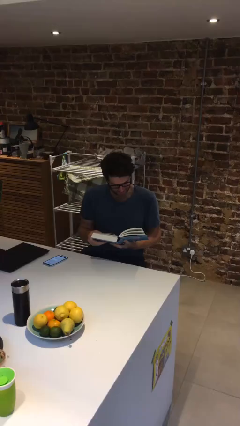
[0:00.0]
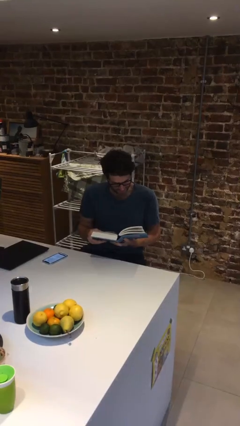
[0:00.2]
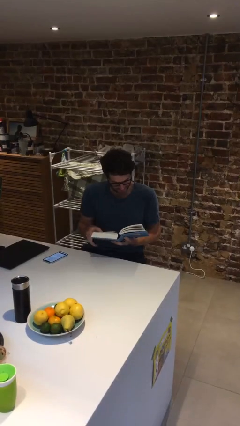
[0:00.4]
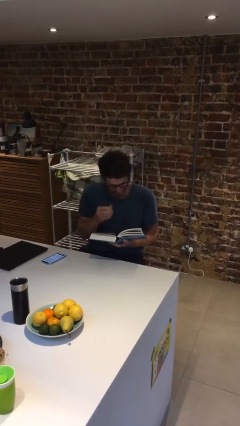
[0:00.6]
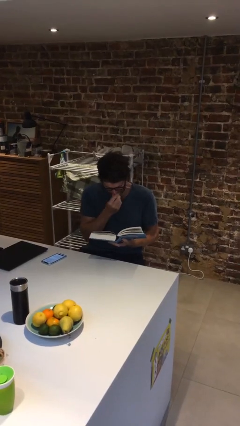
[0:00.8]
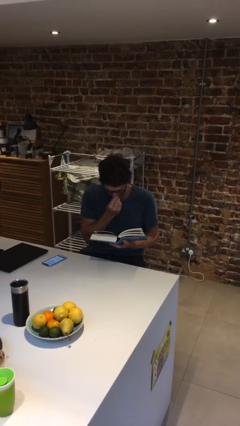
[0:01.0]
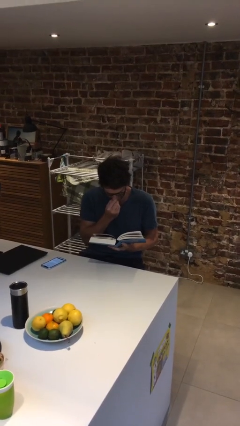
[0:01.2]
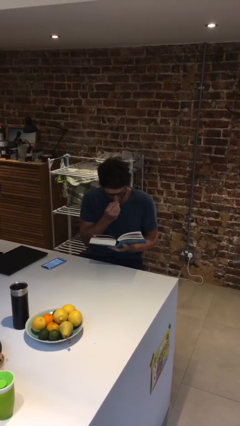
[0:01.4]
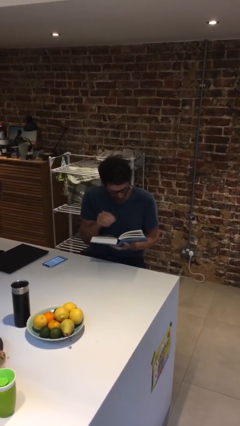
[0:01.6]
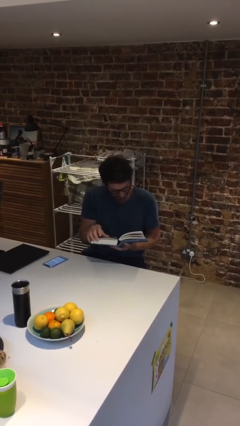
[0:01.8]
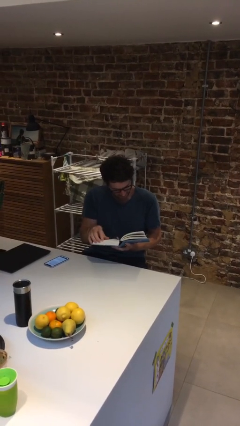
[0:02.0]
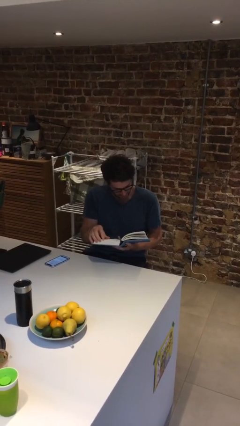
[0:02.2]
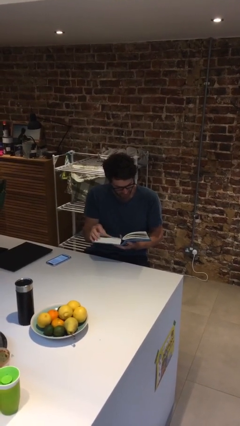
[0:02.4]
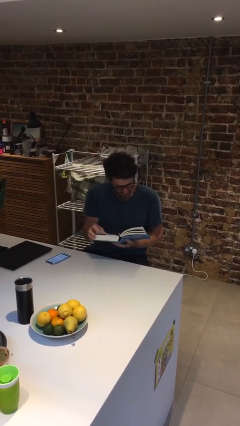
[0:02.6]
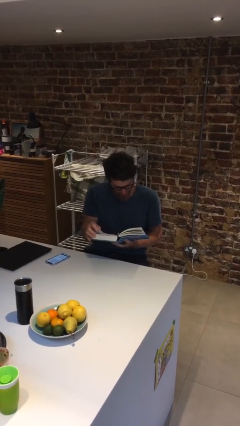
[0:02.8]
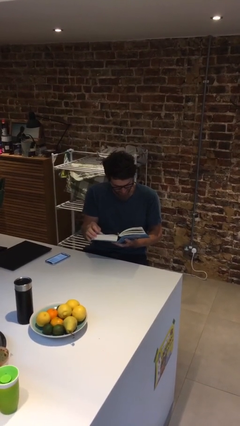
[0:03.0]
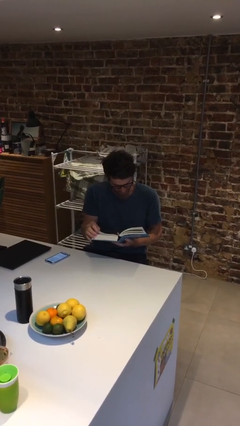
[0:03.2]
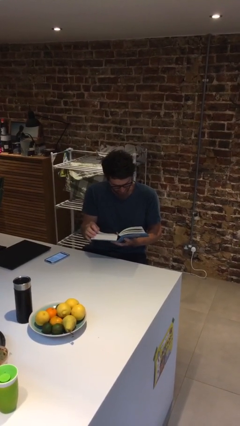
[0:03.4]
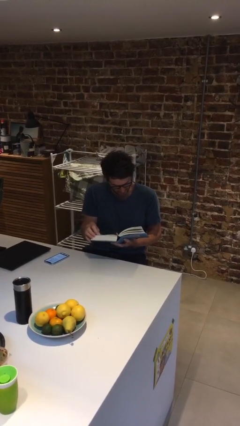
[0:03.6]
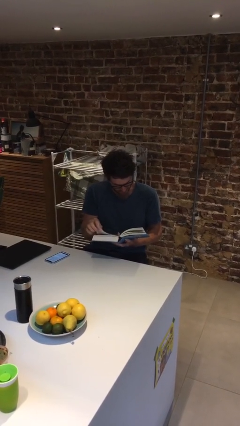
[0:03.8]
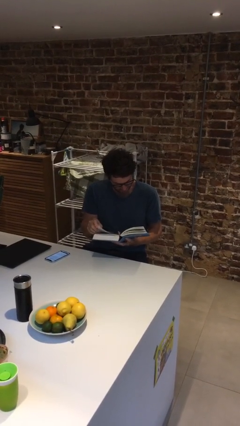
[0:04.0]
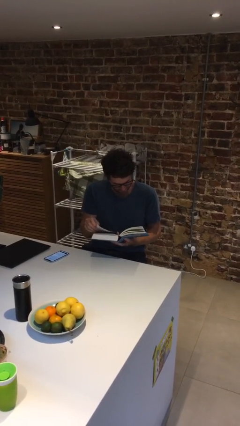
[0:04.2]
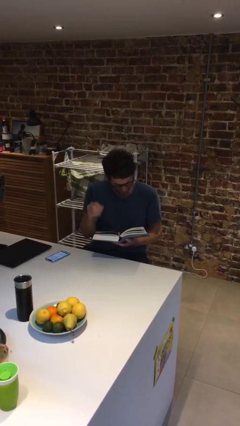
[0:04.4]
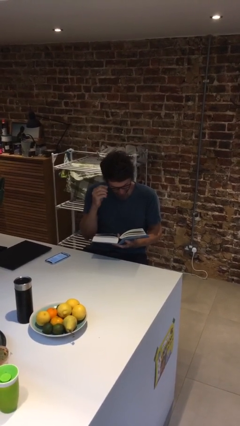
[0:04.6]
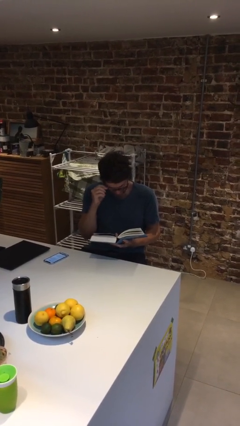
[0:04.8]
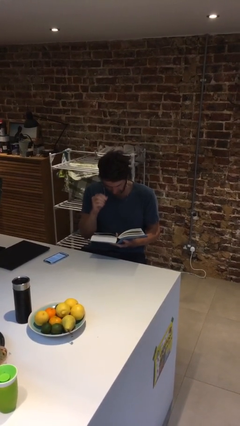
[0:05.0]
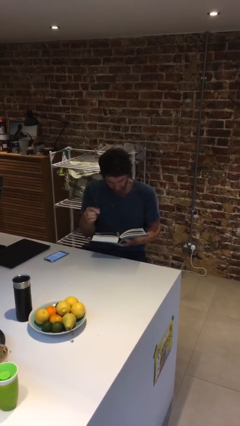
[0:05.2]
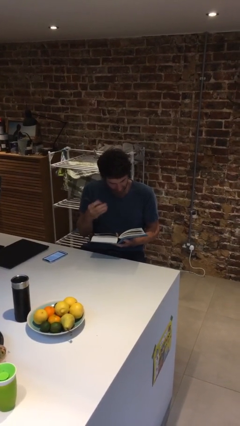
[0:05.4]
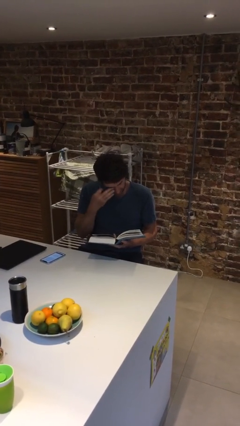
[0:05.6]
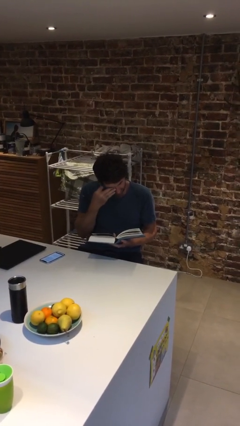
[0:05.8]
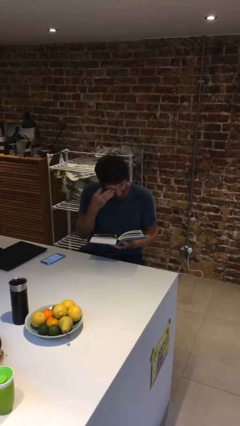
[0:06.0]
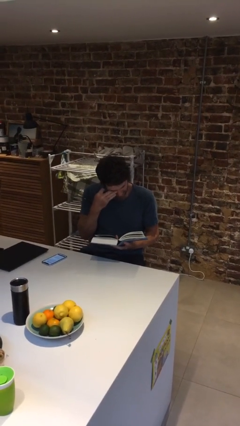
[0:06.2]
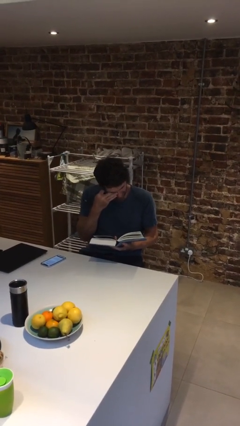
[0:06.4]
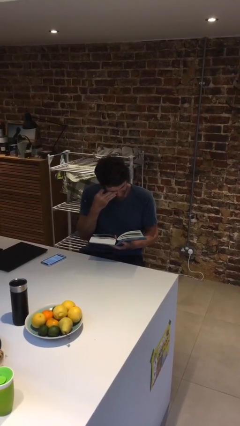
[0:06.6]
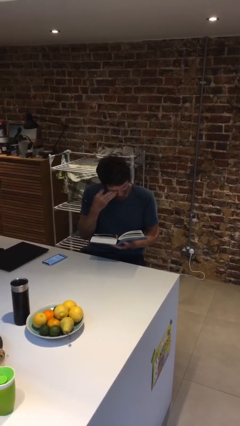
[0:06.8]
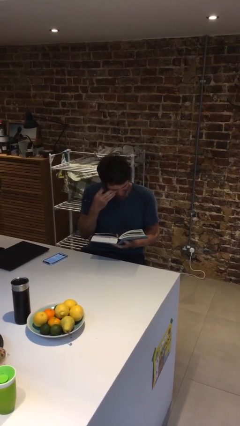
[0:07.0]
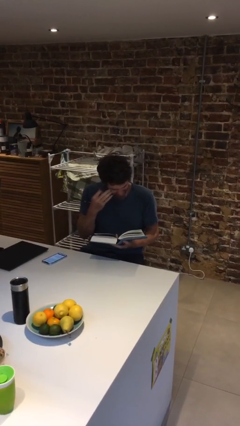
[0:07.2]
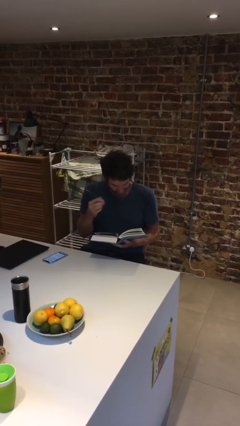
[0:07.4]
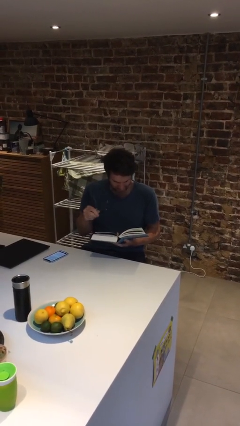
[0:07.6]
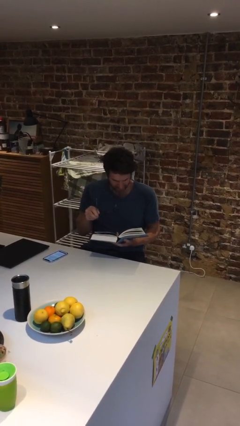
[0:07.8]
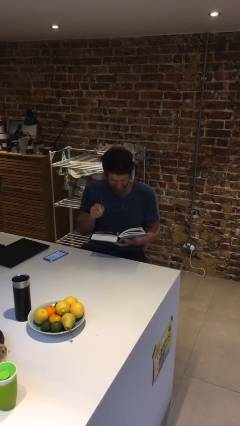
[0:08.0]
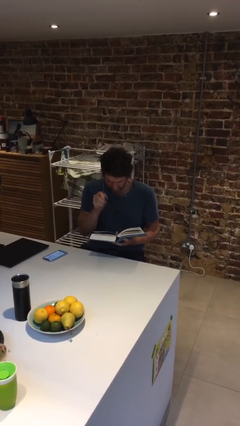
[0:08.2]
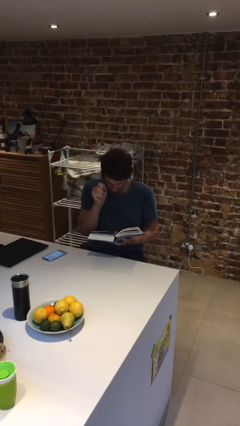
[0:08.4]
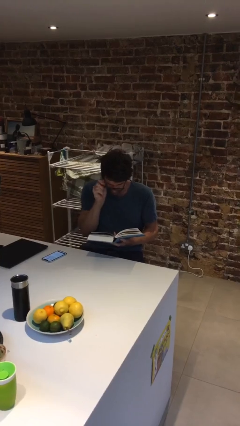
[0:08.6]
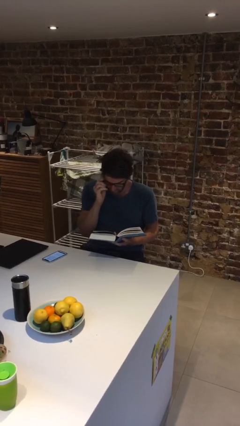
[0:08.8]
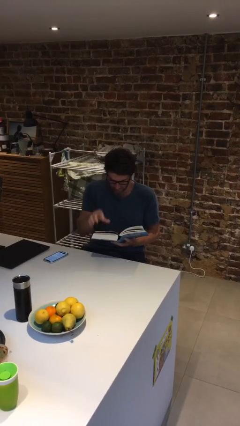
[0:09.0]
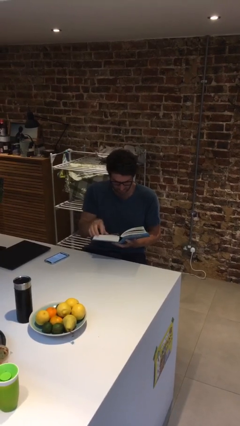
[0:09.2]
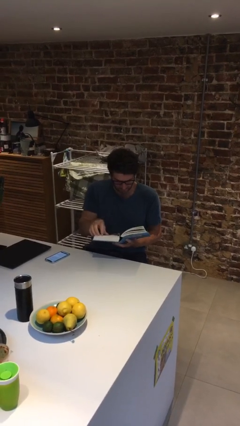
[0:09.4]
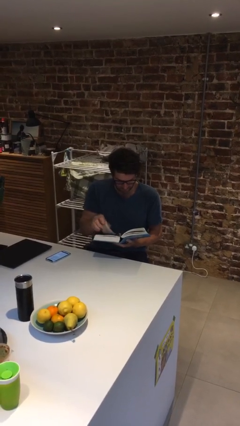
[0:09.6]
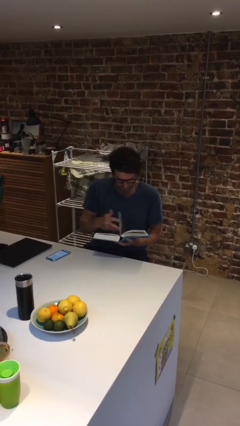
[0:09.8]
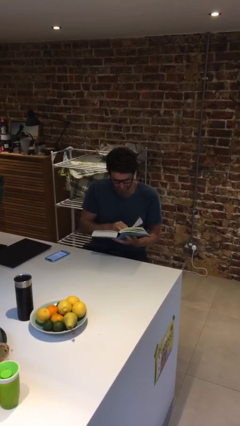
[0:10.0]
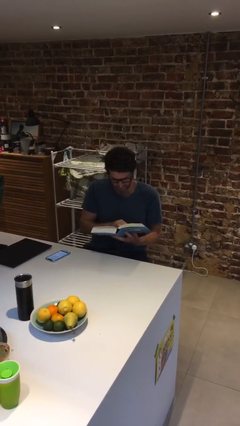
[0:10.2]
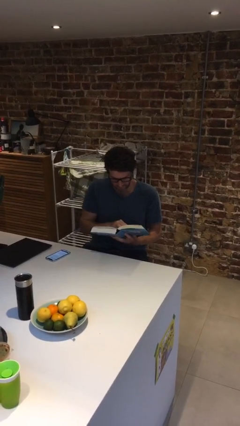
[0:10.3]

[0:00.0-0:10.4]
person reads document

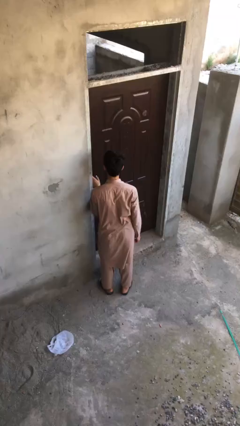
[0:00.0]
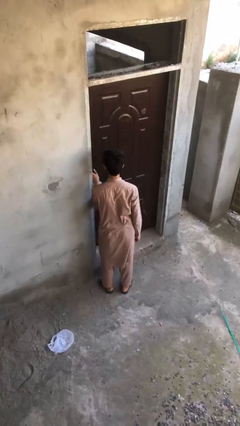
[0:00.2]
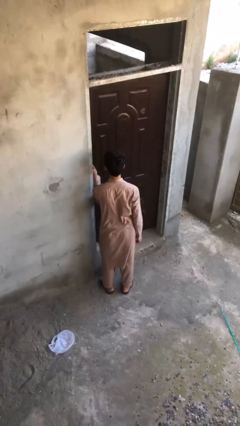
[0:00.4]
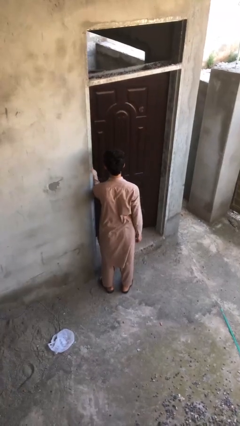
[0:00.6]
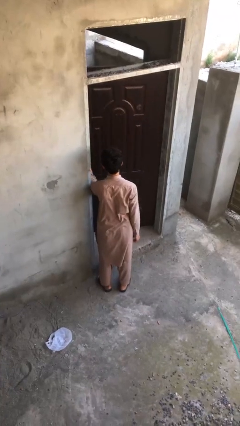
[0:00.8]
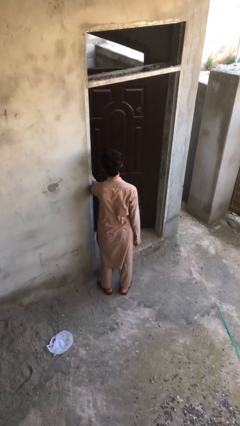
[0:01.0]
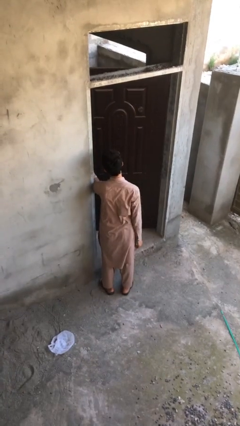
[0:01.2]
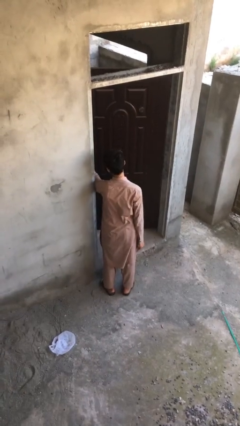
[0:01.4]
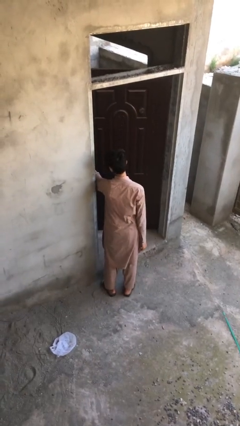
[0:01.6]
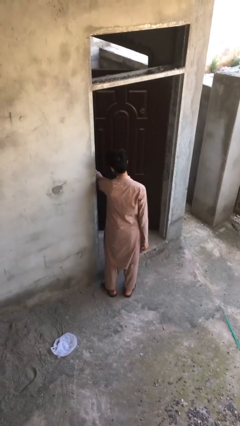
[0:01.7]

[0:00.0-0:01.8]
person opens facility door

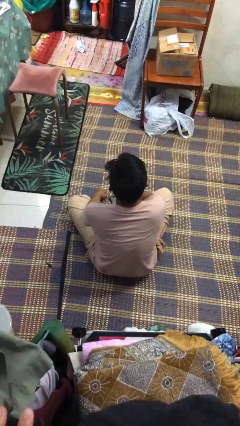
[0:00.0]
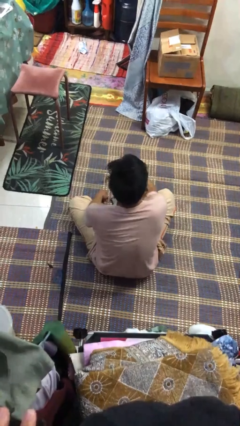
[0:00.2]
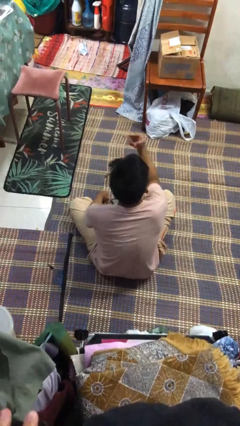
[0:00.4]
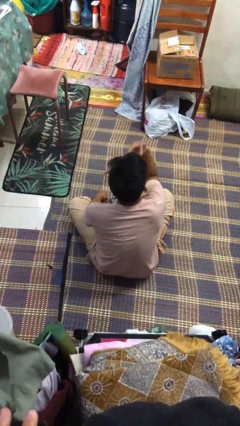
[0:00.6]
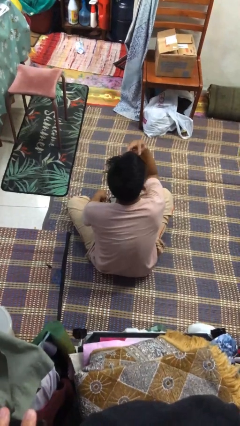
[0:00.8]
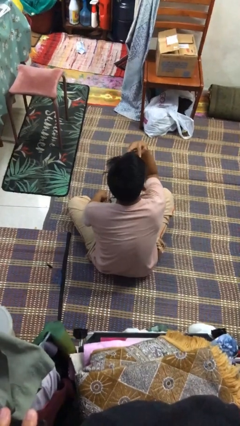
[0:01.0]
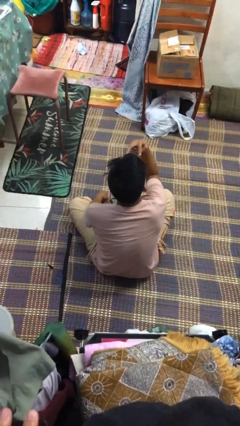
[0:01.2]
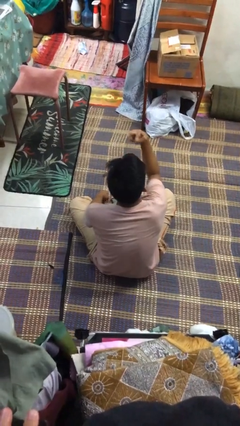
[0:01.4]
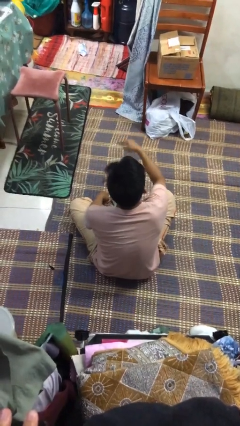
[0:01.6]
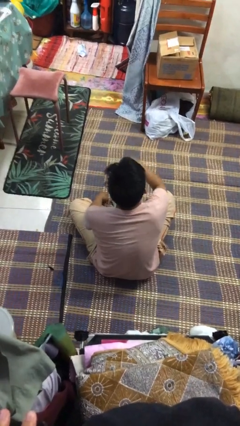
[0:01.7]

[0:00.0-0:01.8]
person gestures watch closely

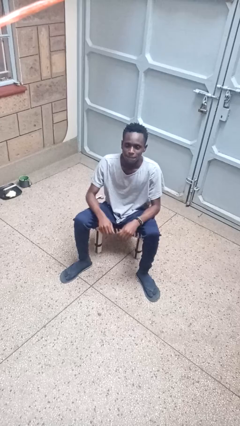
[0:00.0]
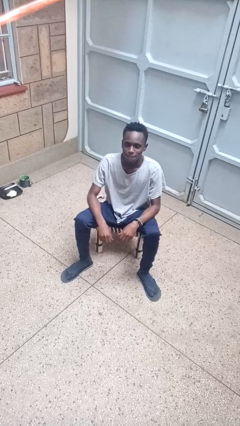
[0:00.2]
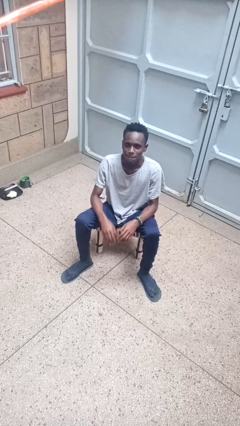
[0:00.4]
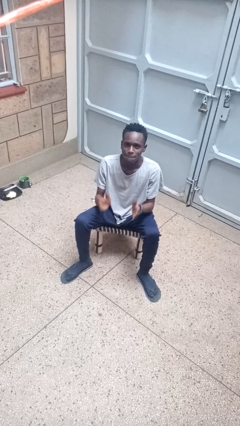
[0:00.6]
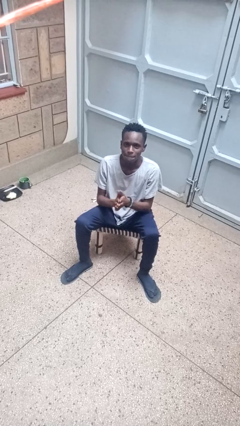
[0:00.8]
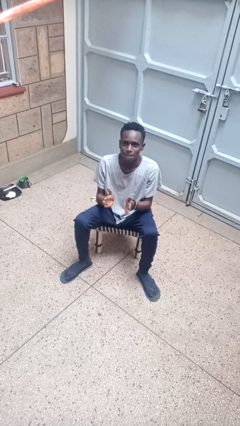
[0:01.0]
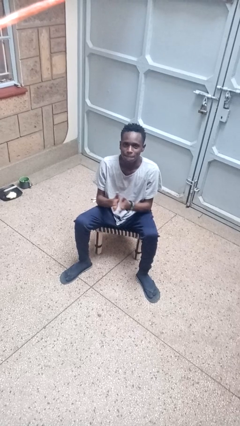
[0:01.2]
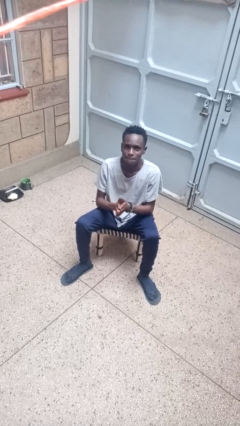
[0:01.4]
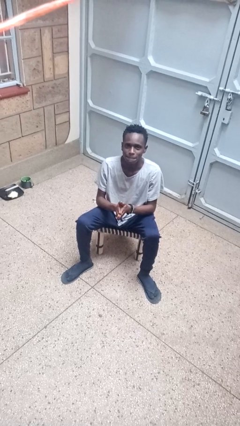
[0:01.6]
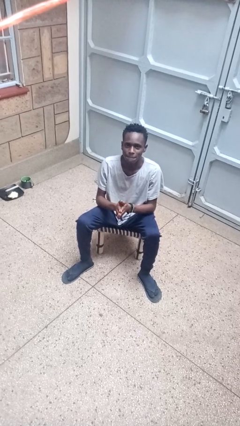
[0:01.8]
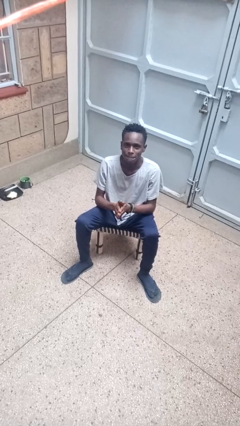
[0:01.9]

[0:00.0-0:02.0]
person claps hands

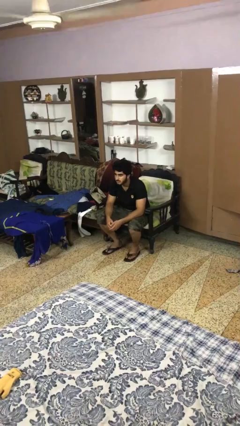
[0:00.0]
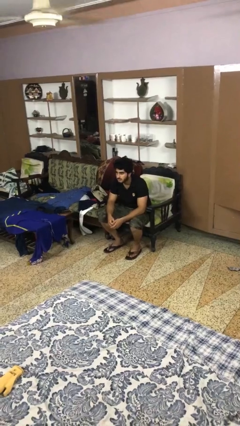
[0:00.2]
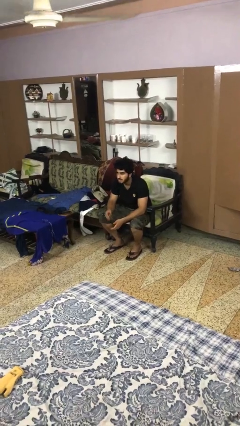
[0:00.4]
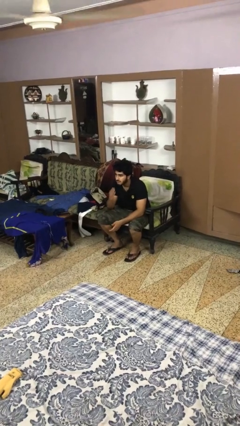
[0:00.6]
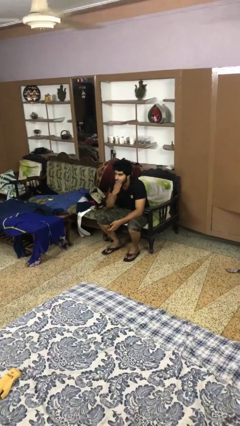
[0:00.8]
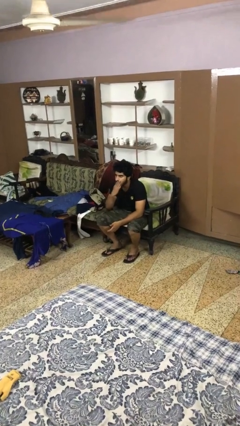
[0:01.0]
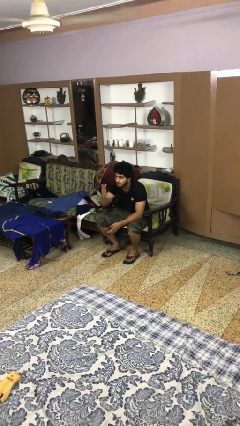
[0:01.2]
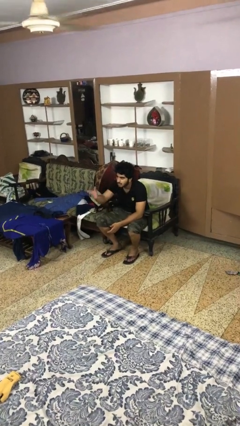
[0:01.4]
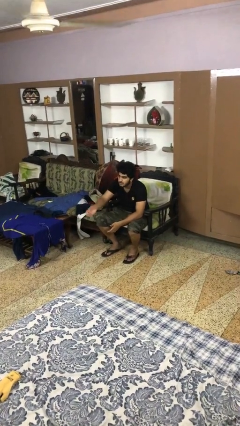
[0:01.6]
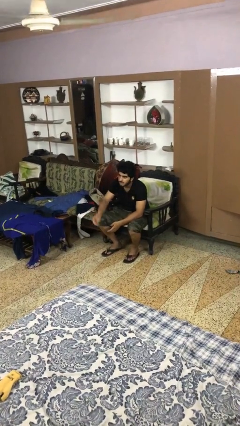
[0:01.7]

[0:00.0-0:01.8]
person gestures blow kiss
